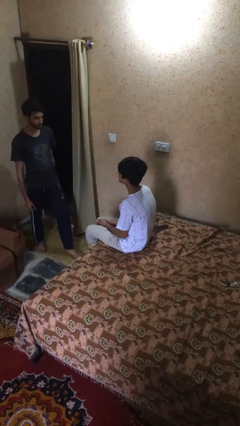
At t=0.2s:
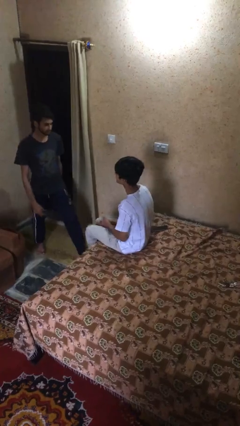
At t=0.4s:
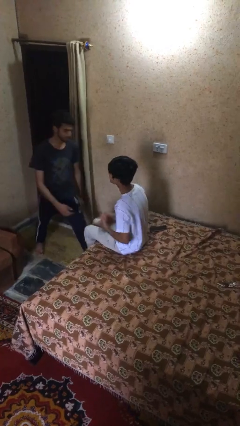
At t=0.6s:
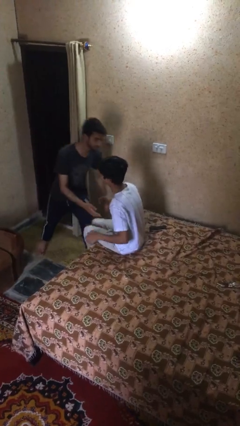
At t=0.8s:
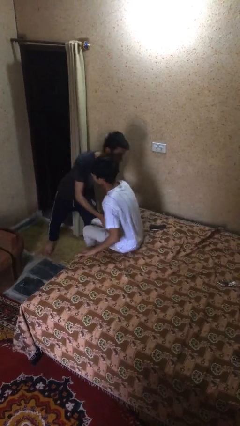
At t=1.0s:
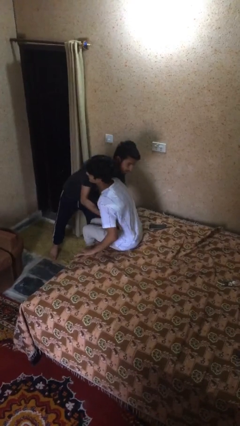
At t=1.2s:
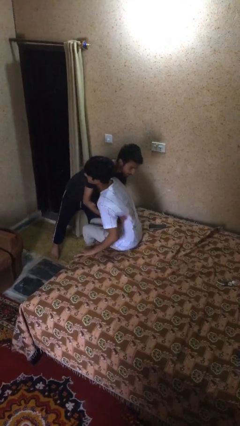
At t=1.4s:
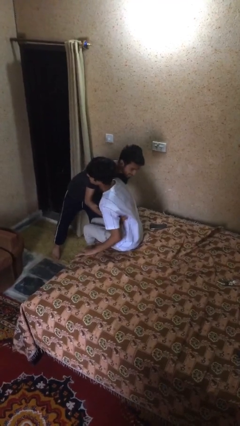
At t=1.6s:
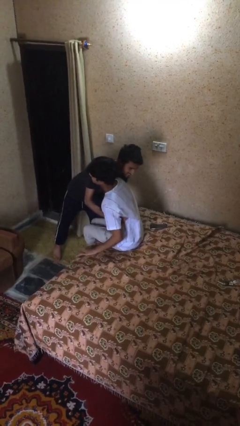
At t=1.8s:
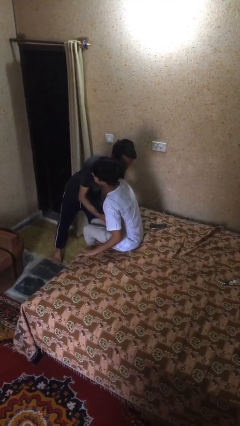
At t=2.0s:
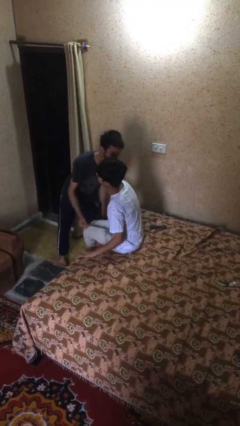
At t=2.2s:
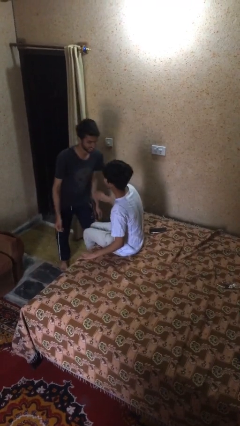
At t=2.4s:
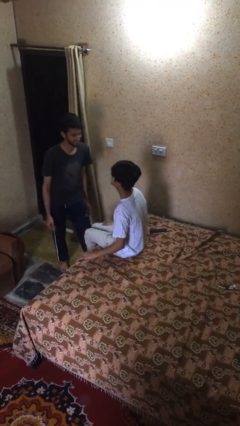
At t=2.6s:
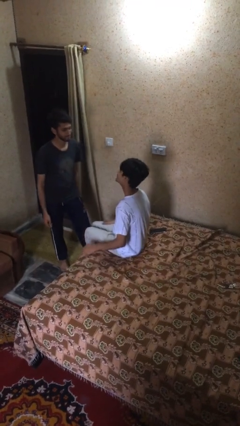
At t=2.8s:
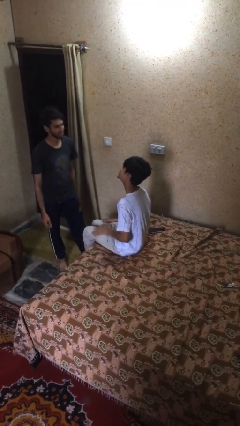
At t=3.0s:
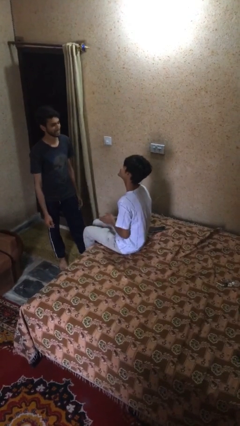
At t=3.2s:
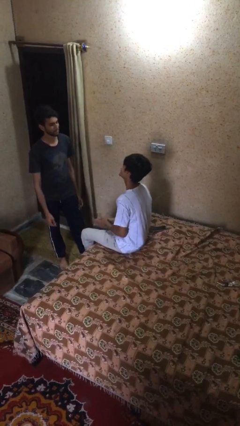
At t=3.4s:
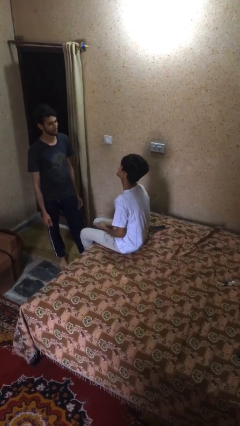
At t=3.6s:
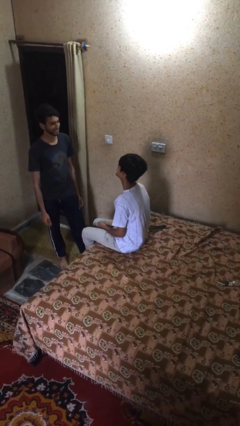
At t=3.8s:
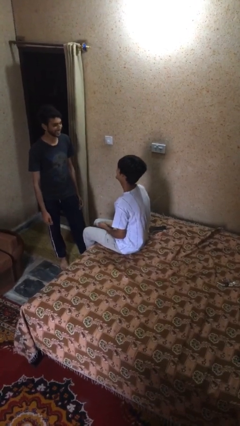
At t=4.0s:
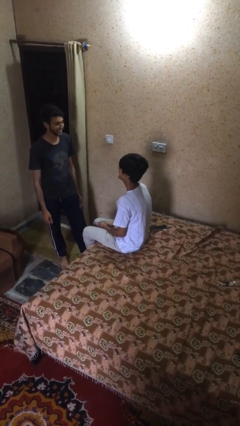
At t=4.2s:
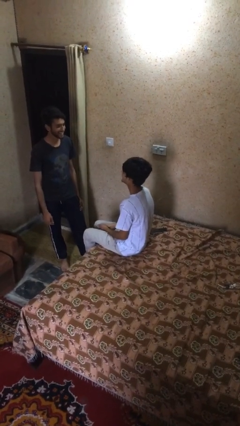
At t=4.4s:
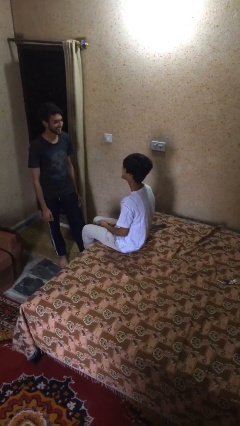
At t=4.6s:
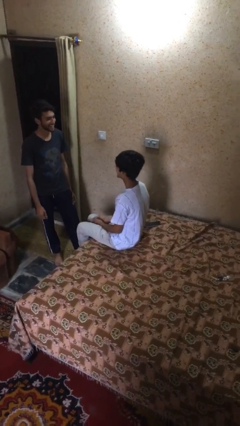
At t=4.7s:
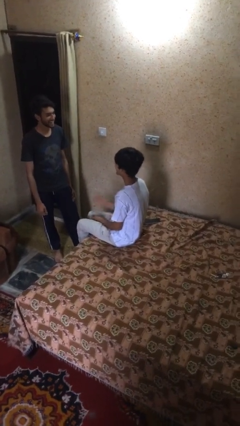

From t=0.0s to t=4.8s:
person embraces person

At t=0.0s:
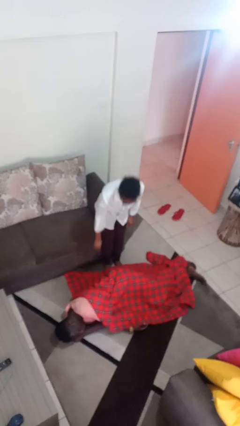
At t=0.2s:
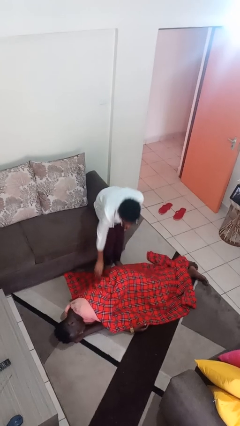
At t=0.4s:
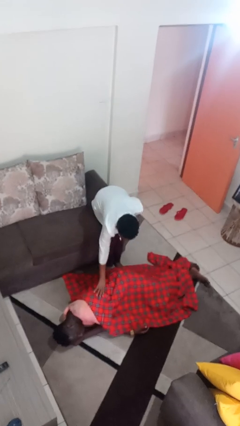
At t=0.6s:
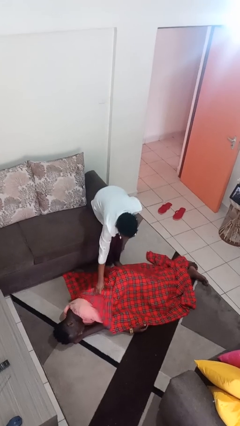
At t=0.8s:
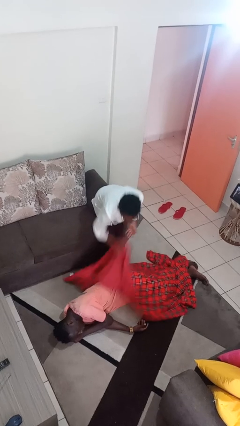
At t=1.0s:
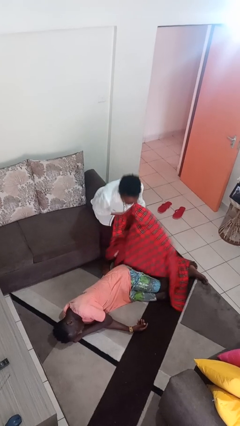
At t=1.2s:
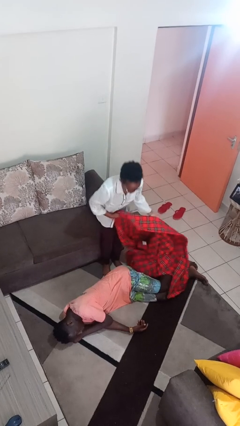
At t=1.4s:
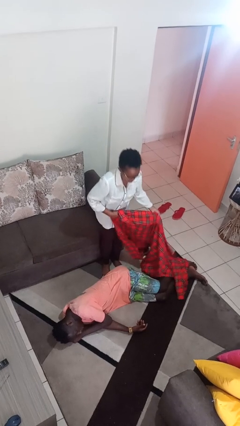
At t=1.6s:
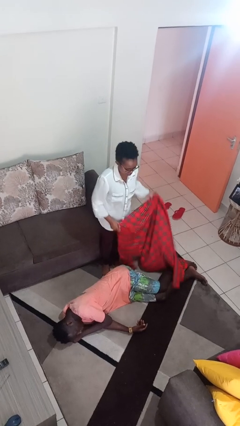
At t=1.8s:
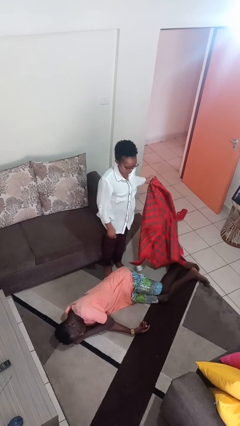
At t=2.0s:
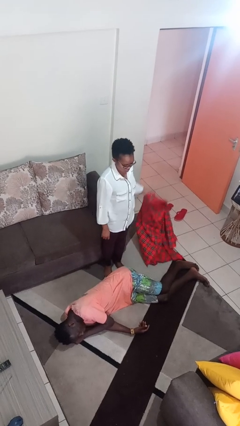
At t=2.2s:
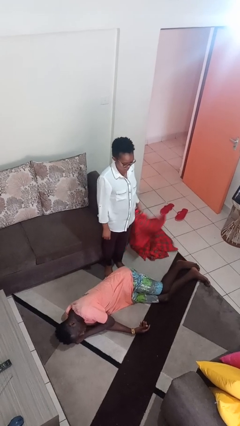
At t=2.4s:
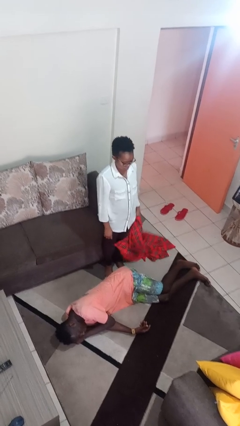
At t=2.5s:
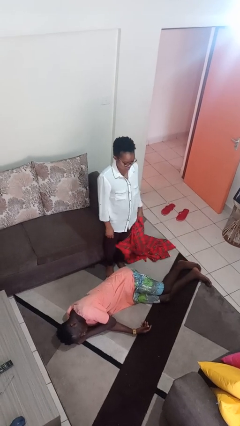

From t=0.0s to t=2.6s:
person uncovers friend with blanket

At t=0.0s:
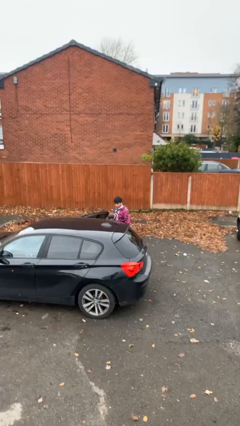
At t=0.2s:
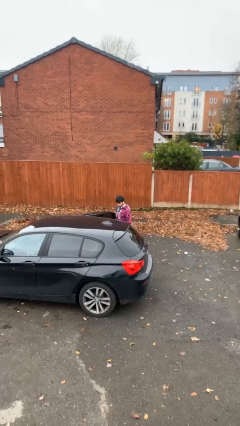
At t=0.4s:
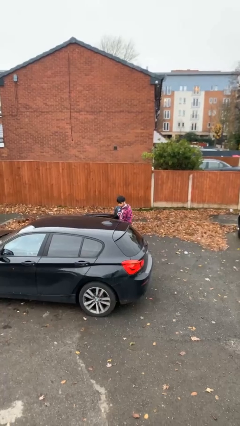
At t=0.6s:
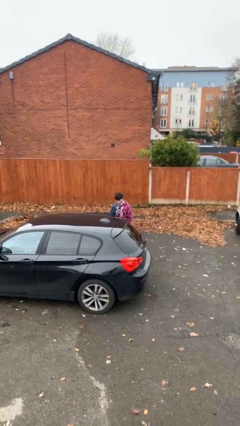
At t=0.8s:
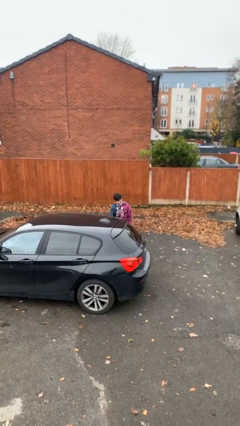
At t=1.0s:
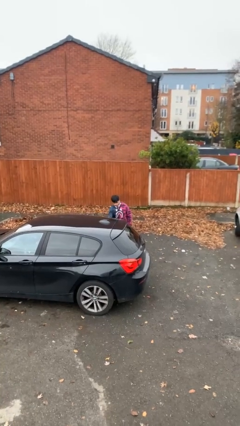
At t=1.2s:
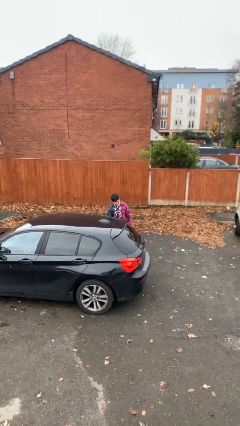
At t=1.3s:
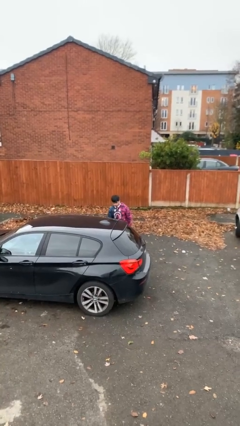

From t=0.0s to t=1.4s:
person closes car door

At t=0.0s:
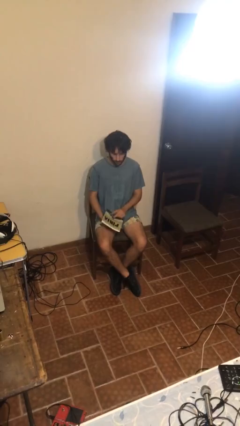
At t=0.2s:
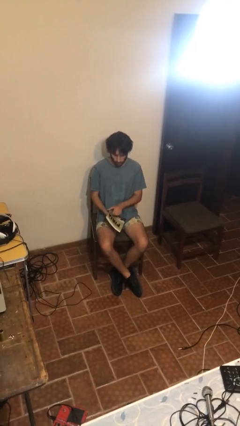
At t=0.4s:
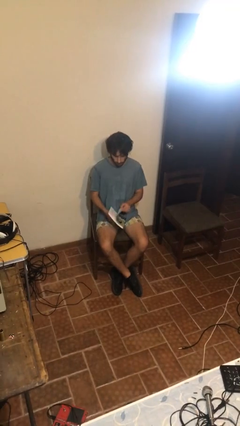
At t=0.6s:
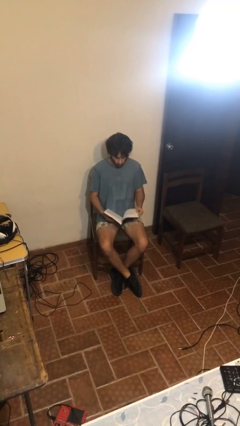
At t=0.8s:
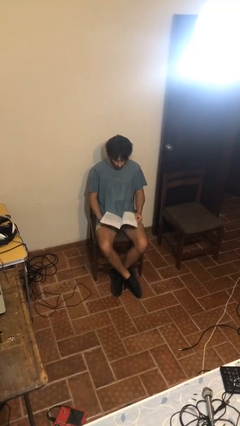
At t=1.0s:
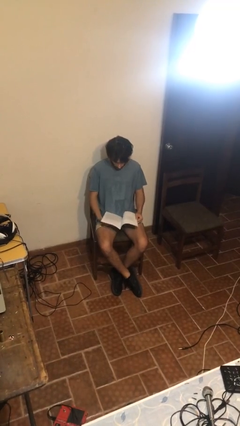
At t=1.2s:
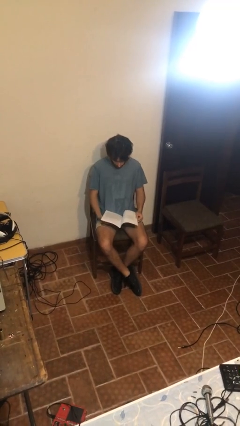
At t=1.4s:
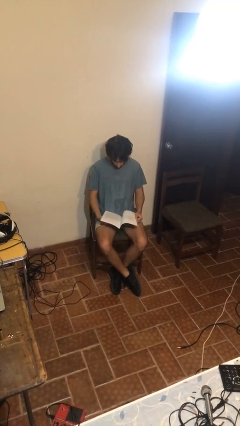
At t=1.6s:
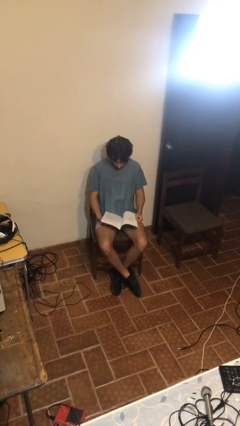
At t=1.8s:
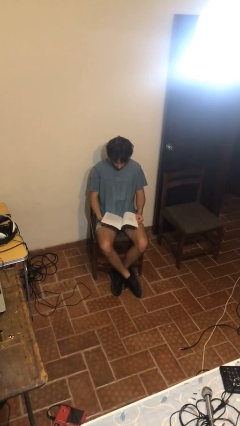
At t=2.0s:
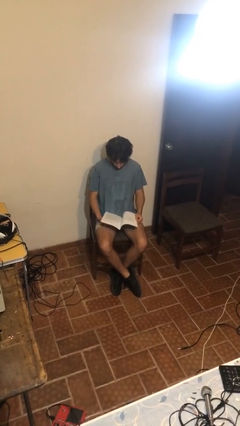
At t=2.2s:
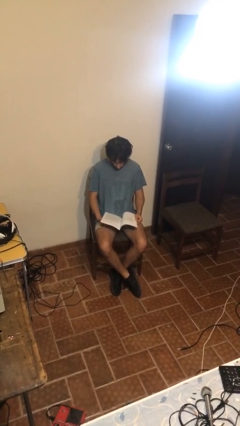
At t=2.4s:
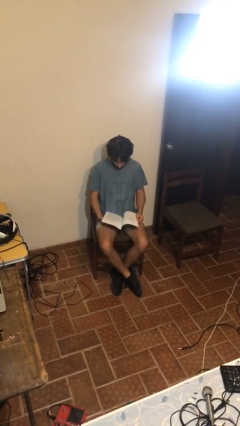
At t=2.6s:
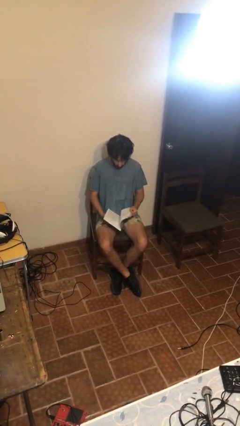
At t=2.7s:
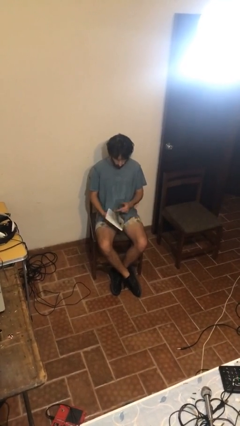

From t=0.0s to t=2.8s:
person reads document

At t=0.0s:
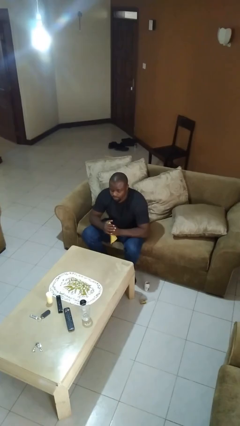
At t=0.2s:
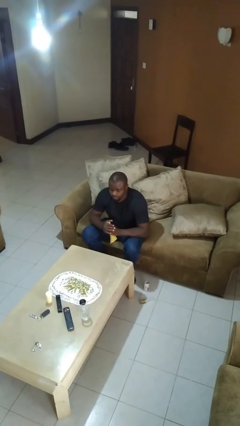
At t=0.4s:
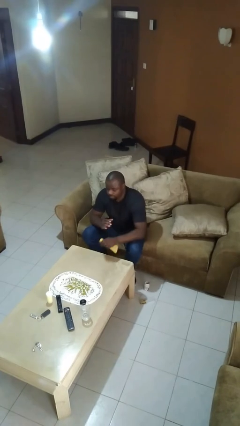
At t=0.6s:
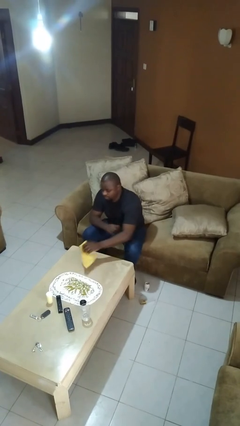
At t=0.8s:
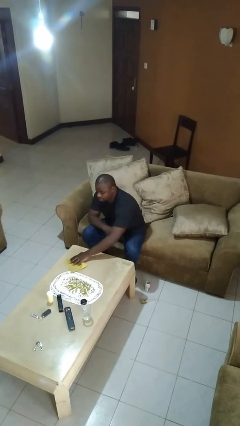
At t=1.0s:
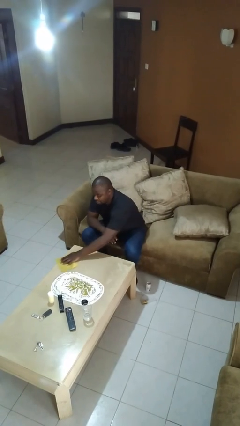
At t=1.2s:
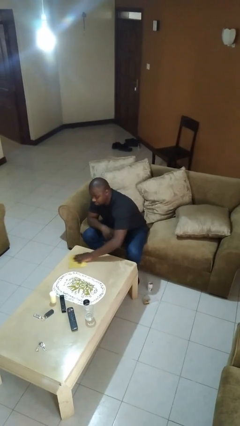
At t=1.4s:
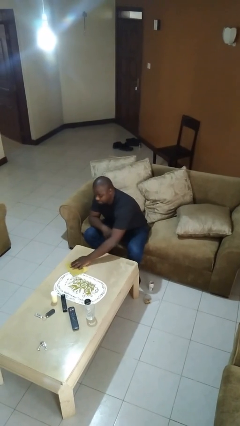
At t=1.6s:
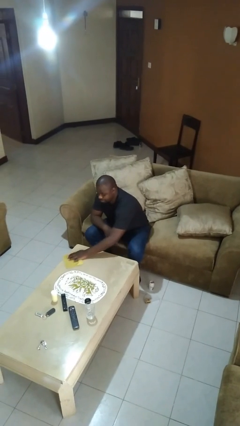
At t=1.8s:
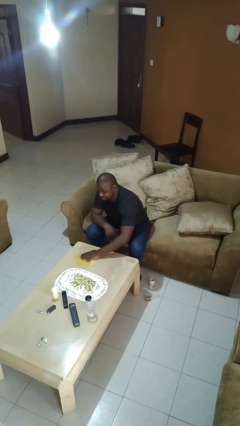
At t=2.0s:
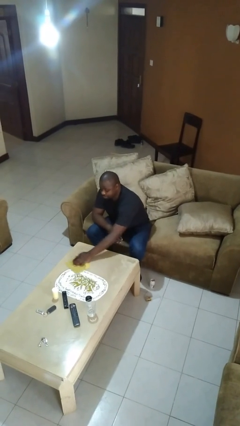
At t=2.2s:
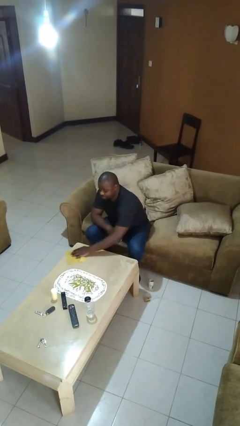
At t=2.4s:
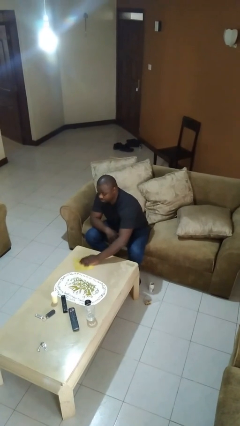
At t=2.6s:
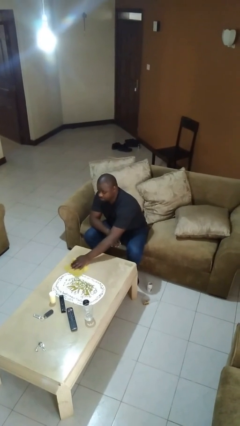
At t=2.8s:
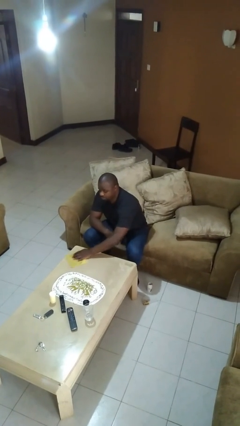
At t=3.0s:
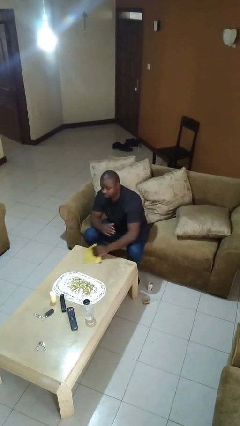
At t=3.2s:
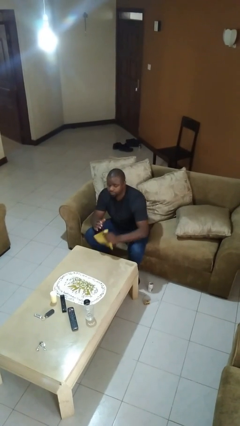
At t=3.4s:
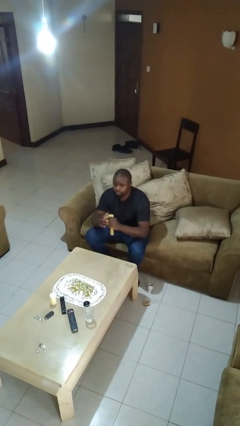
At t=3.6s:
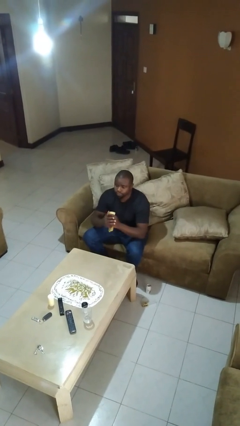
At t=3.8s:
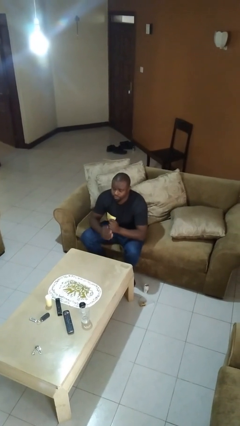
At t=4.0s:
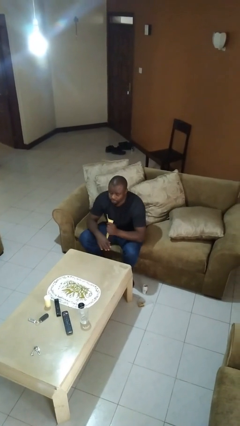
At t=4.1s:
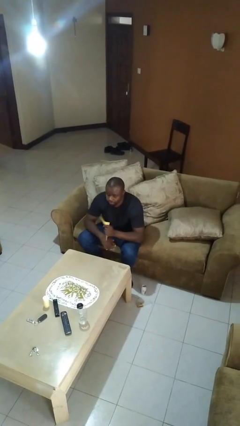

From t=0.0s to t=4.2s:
person cleans table with rag

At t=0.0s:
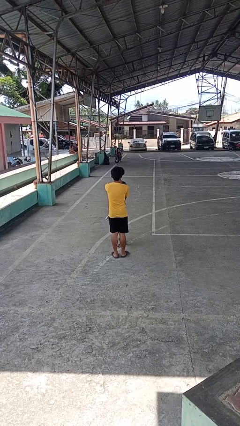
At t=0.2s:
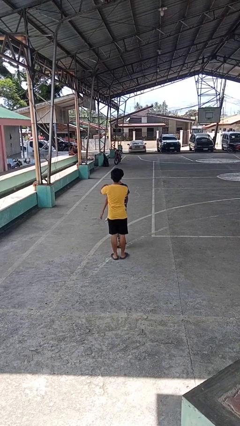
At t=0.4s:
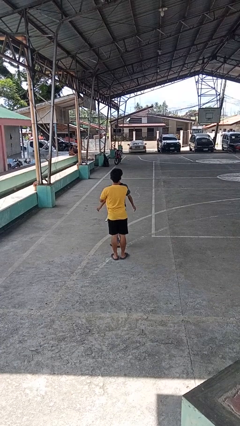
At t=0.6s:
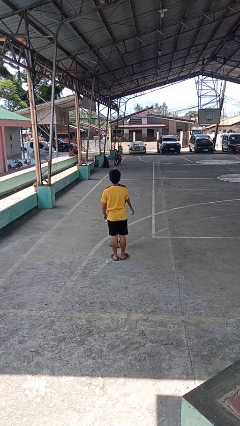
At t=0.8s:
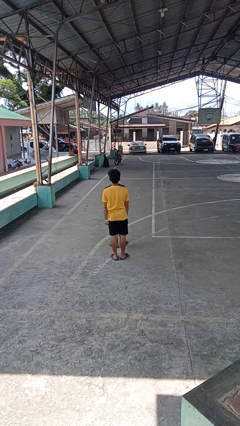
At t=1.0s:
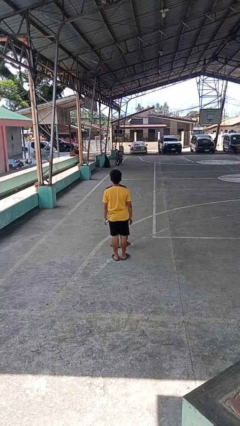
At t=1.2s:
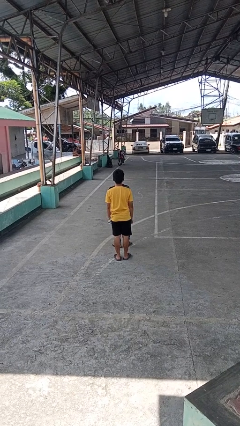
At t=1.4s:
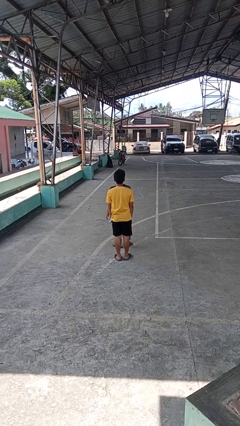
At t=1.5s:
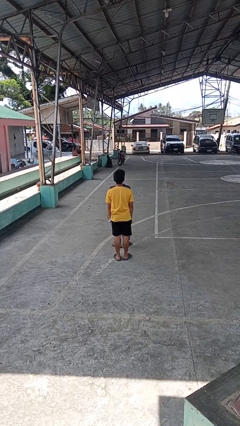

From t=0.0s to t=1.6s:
person spins person around
